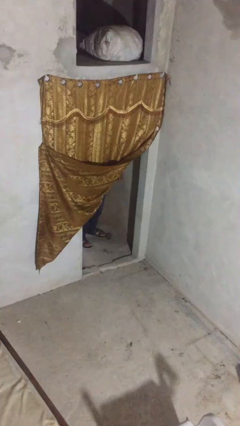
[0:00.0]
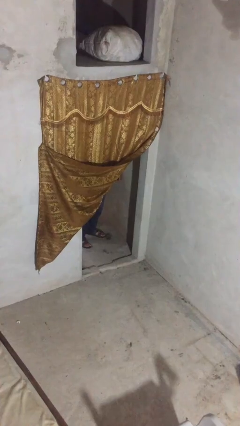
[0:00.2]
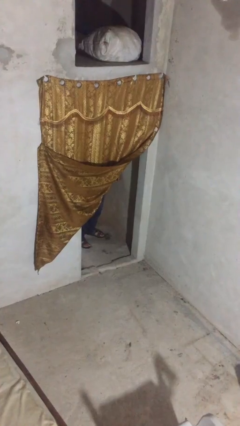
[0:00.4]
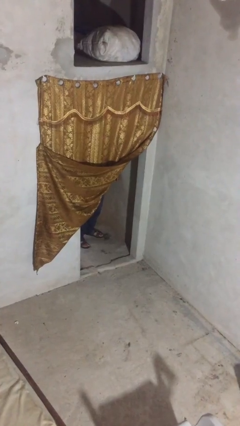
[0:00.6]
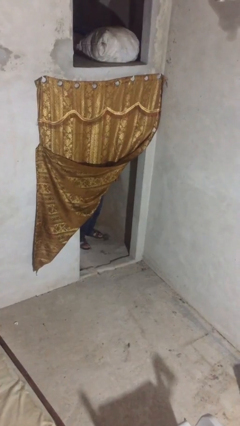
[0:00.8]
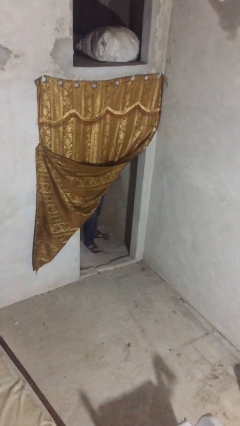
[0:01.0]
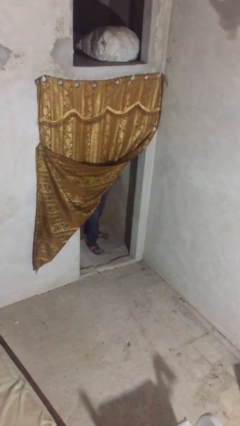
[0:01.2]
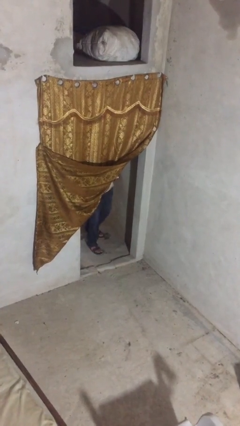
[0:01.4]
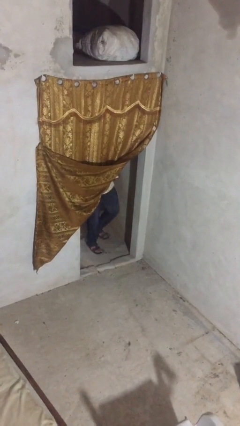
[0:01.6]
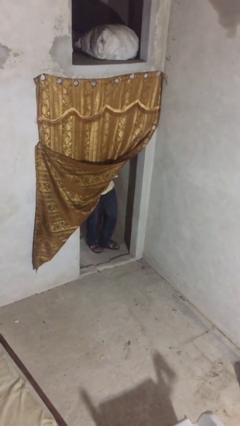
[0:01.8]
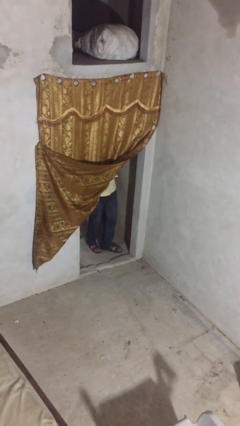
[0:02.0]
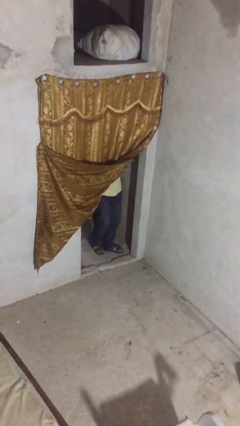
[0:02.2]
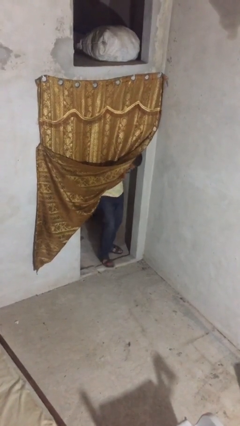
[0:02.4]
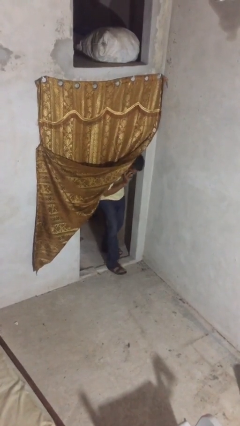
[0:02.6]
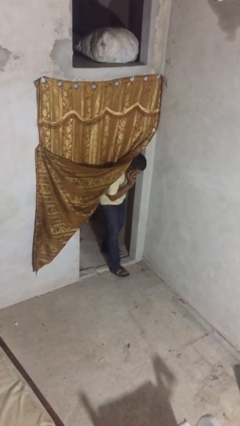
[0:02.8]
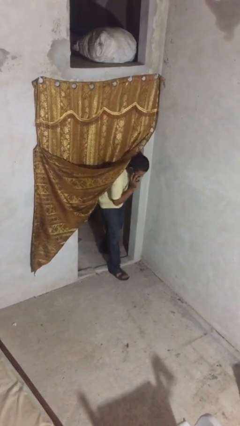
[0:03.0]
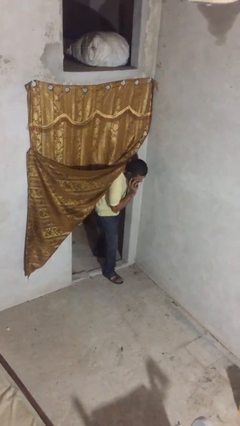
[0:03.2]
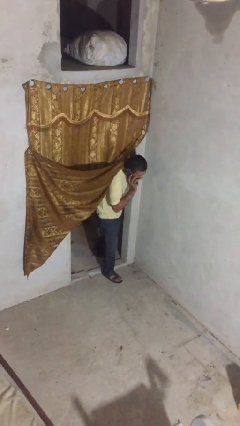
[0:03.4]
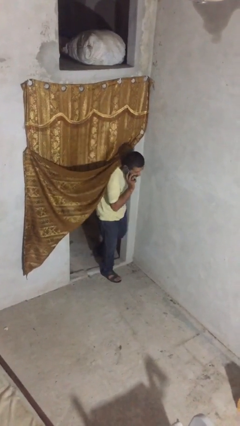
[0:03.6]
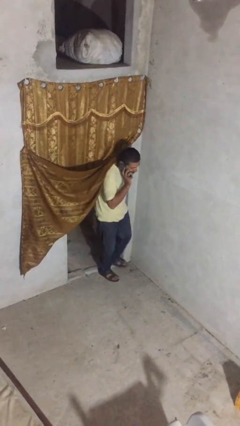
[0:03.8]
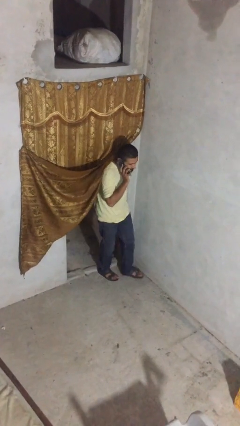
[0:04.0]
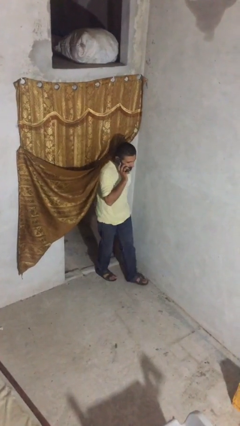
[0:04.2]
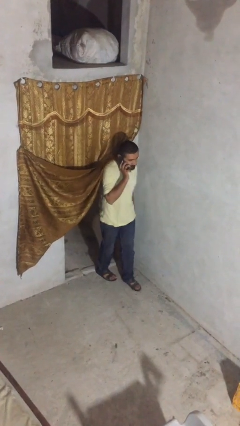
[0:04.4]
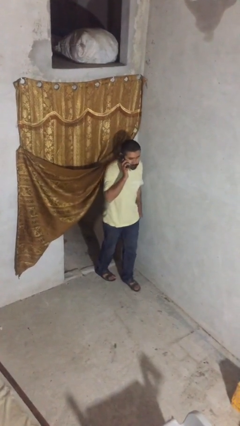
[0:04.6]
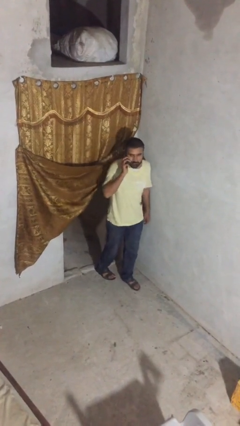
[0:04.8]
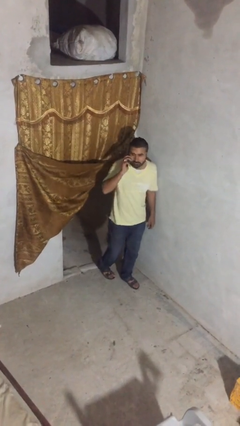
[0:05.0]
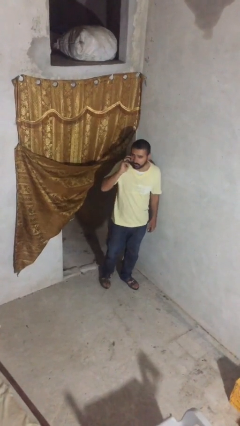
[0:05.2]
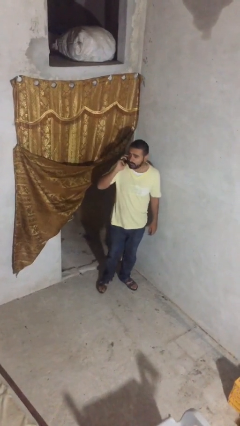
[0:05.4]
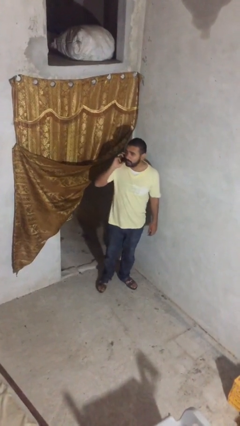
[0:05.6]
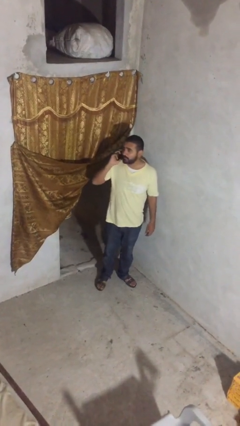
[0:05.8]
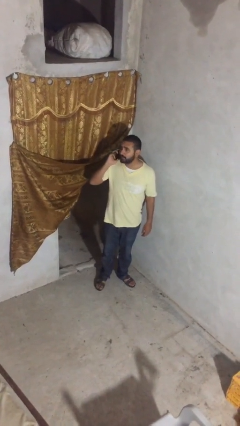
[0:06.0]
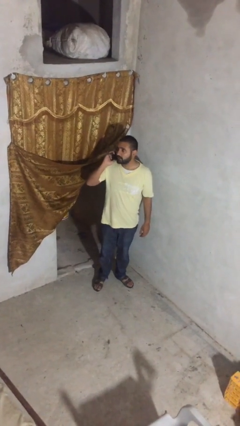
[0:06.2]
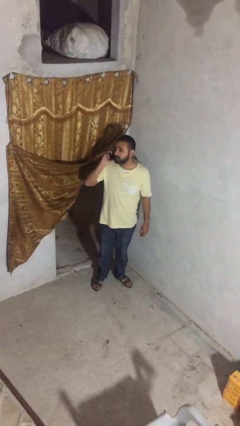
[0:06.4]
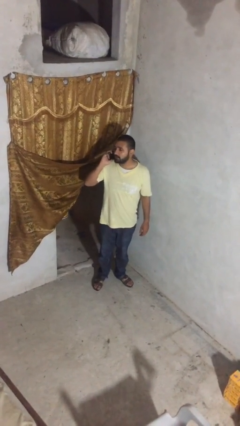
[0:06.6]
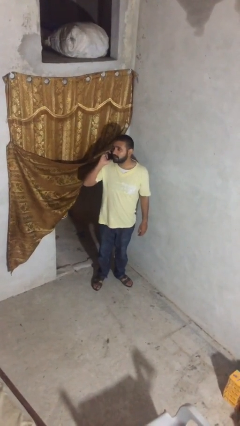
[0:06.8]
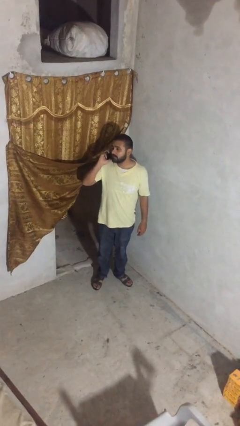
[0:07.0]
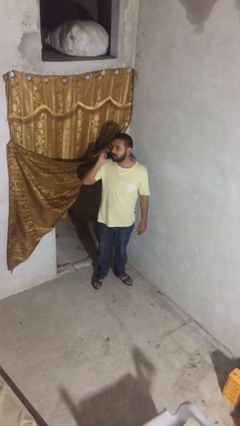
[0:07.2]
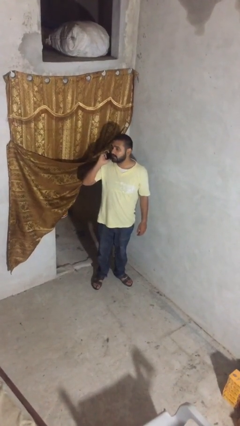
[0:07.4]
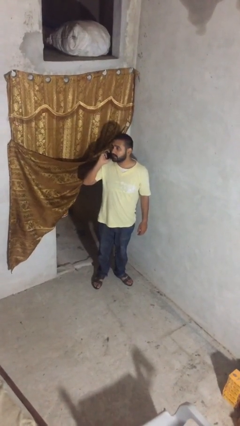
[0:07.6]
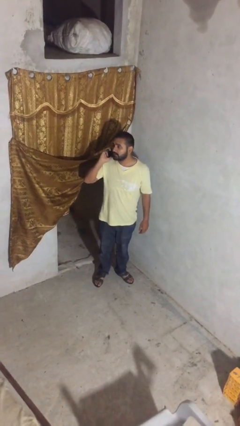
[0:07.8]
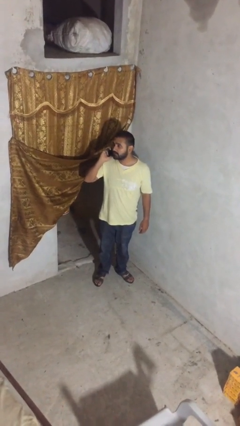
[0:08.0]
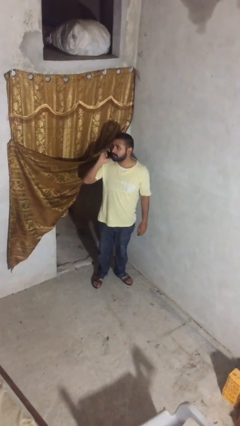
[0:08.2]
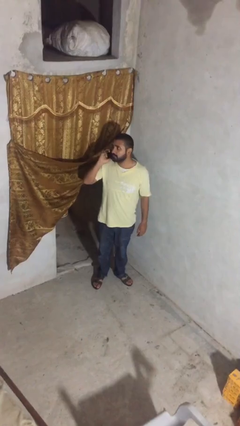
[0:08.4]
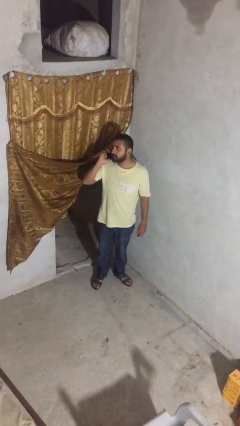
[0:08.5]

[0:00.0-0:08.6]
person enters scene through structure

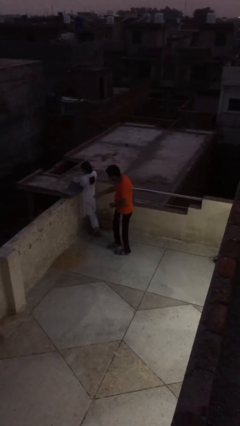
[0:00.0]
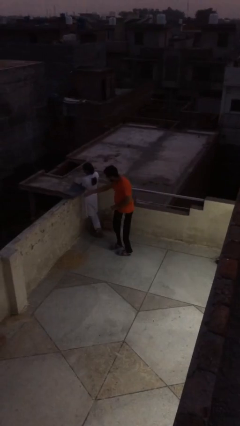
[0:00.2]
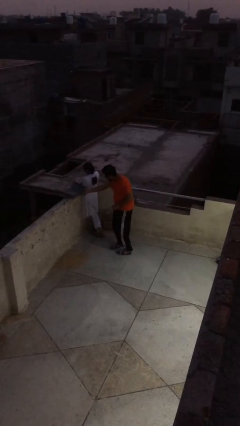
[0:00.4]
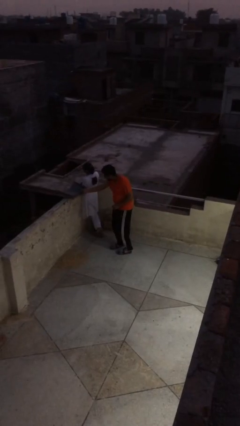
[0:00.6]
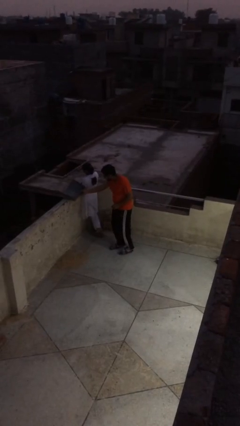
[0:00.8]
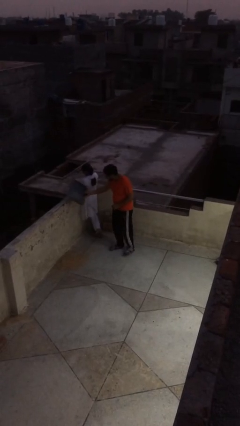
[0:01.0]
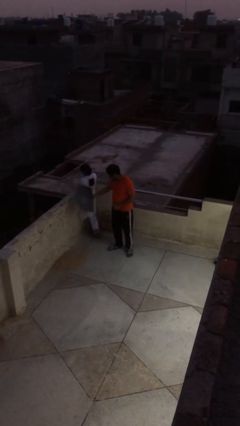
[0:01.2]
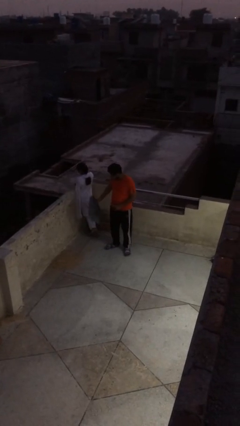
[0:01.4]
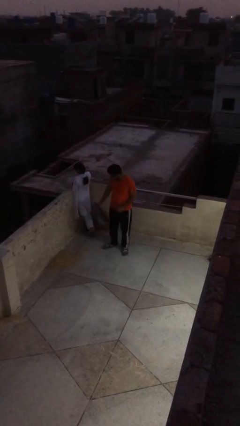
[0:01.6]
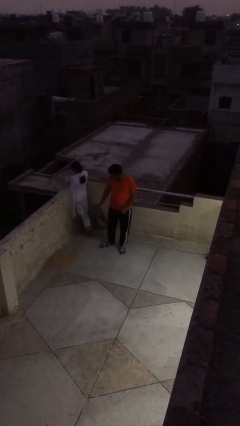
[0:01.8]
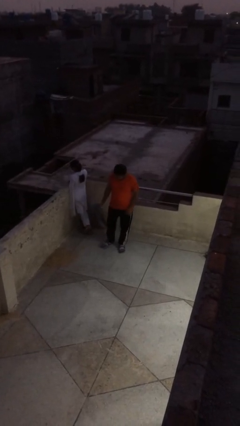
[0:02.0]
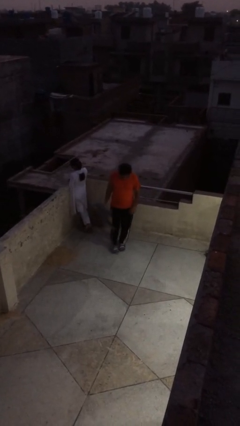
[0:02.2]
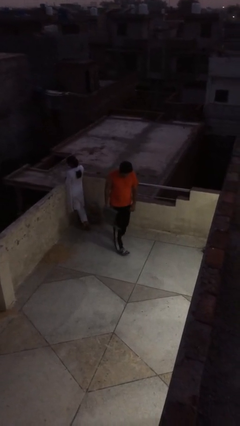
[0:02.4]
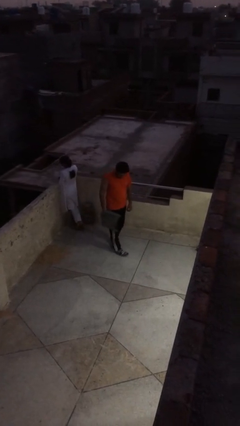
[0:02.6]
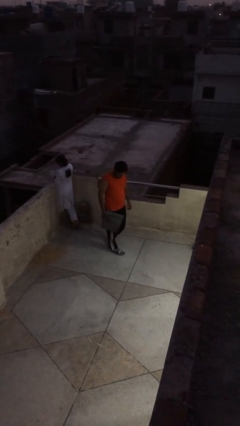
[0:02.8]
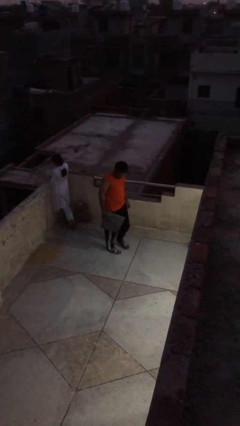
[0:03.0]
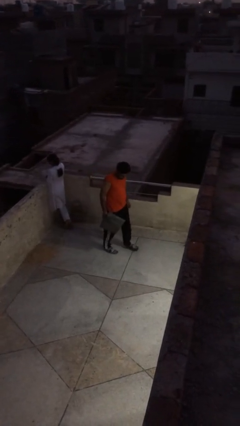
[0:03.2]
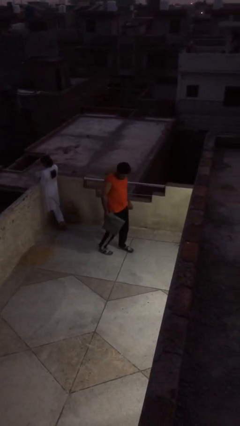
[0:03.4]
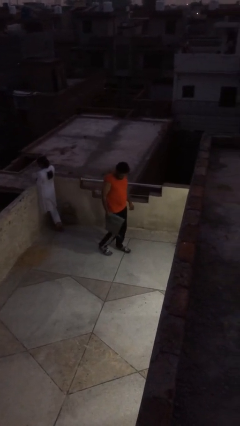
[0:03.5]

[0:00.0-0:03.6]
person steals object from person

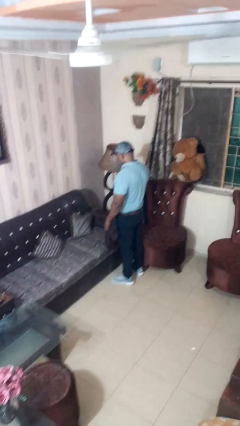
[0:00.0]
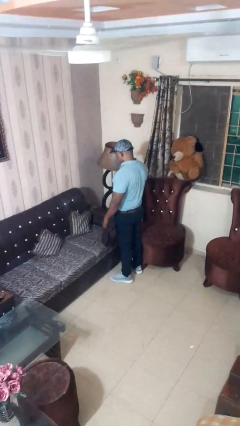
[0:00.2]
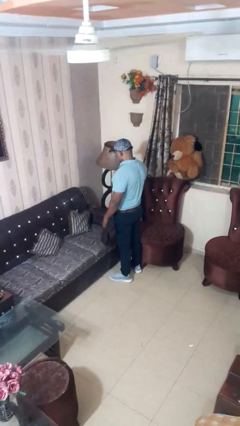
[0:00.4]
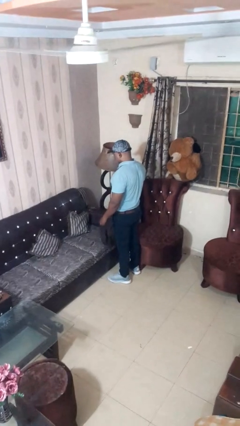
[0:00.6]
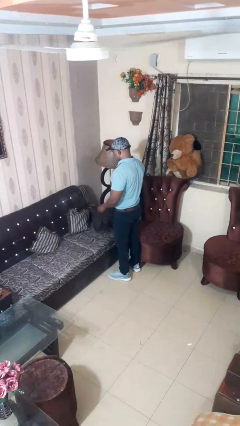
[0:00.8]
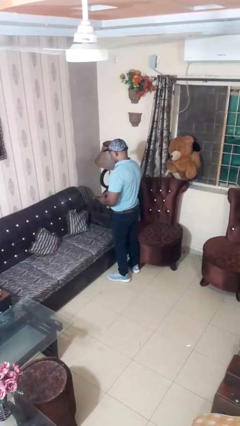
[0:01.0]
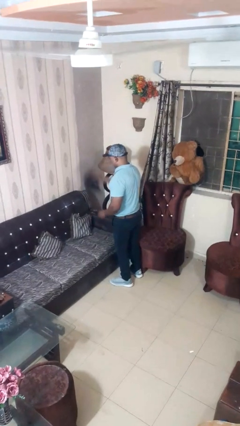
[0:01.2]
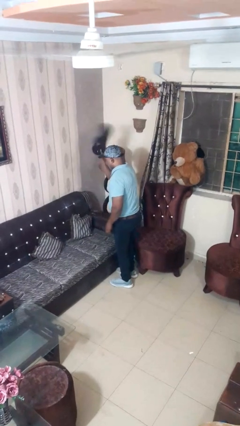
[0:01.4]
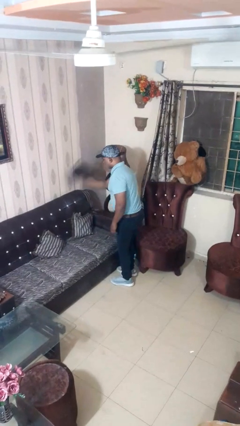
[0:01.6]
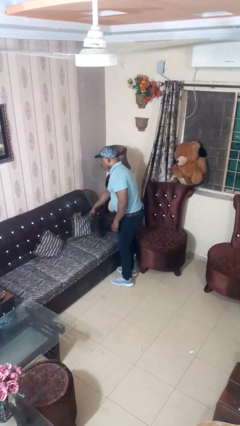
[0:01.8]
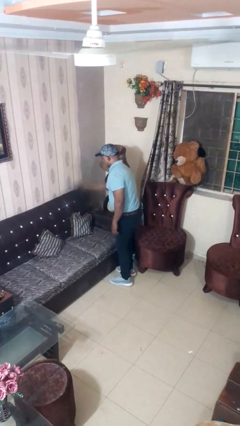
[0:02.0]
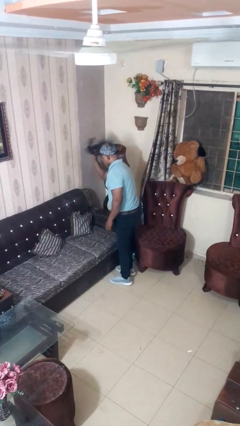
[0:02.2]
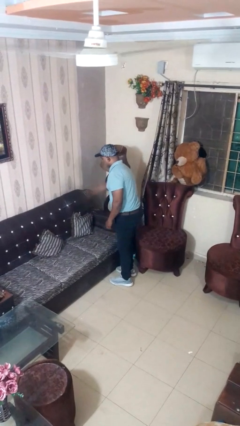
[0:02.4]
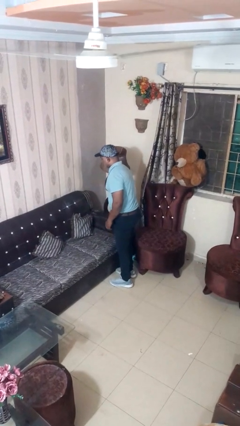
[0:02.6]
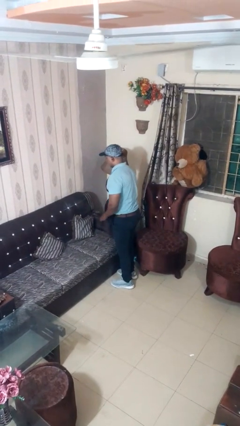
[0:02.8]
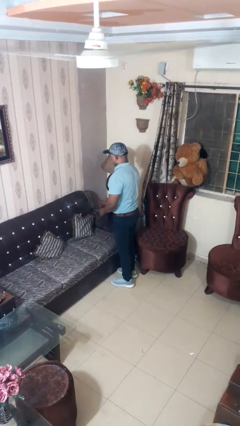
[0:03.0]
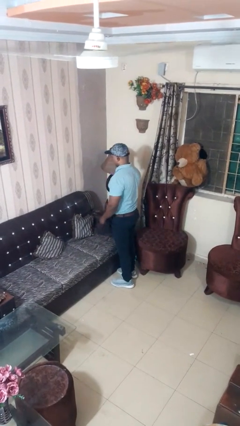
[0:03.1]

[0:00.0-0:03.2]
person dusts furniture

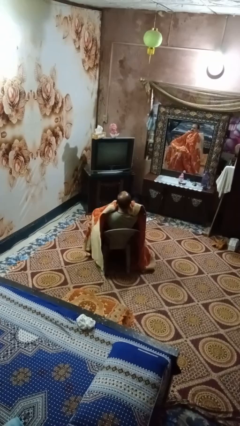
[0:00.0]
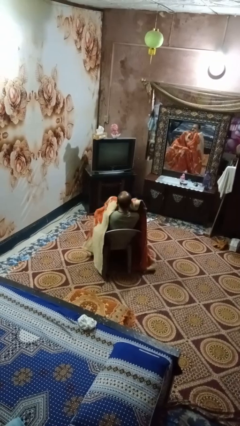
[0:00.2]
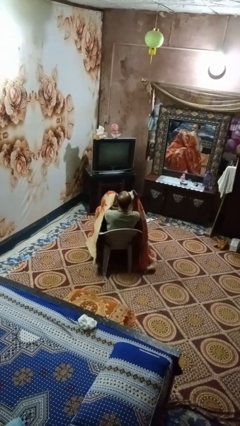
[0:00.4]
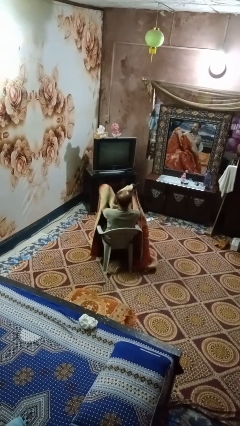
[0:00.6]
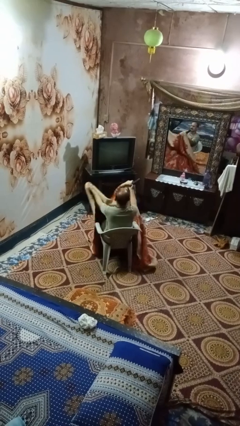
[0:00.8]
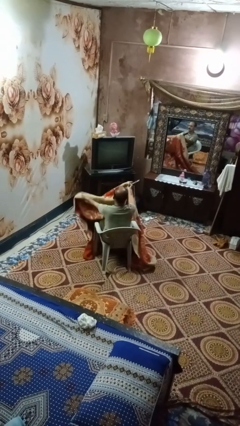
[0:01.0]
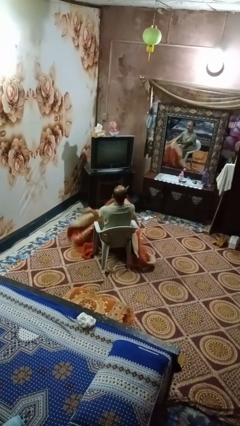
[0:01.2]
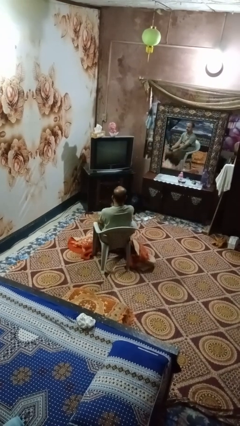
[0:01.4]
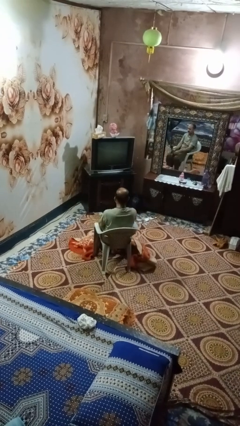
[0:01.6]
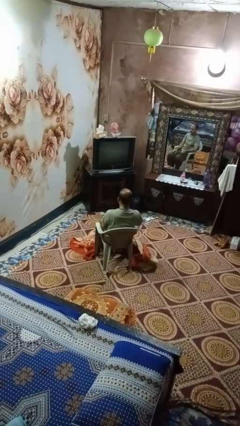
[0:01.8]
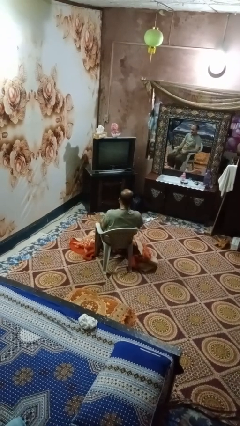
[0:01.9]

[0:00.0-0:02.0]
person uncovers with blanket

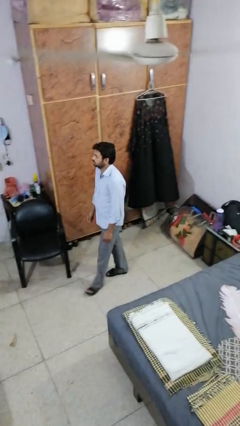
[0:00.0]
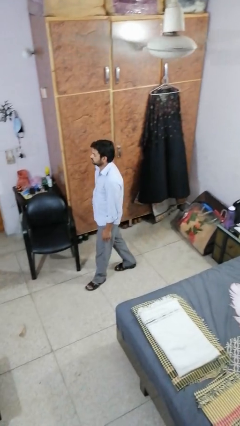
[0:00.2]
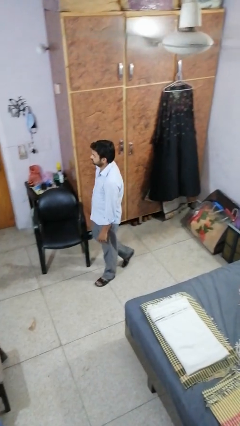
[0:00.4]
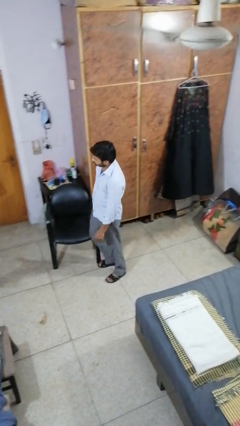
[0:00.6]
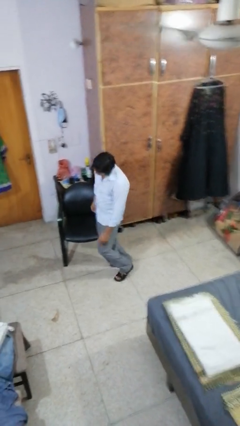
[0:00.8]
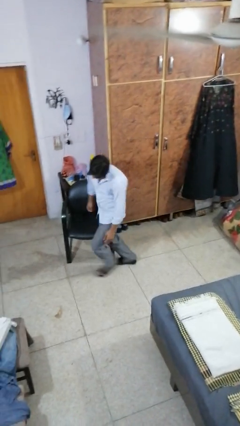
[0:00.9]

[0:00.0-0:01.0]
person trips on object on floor
